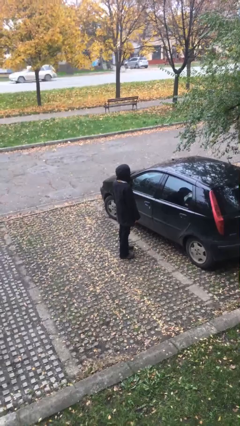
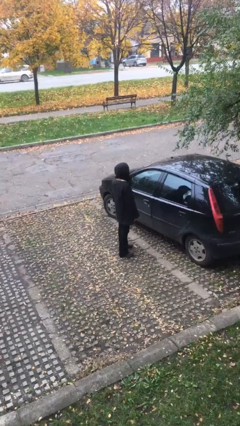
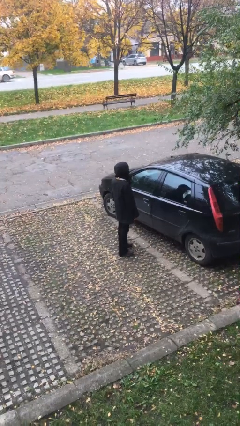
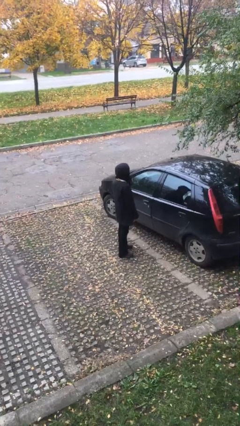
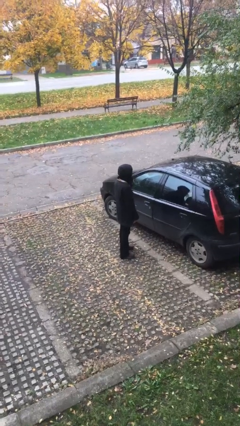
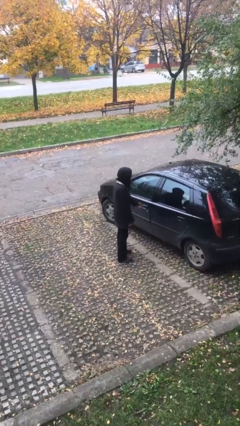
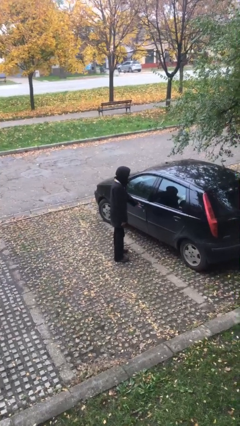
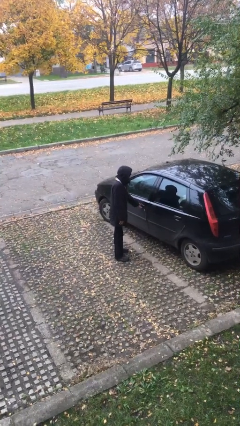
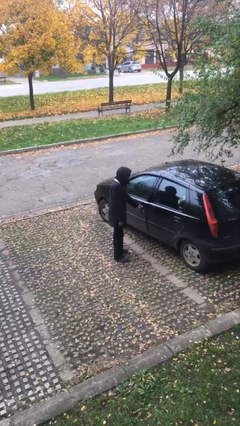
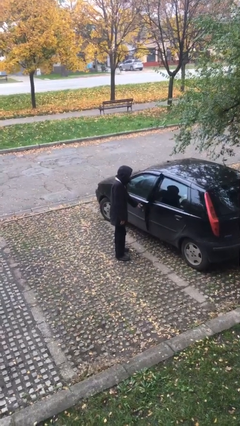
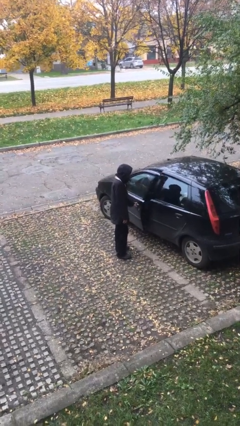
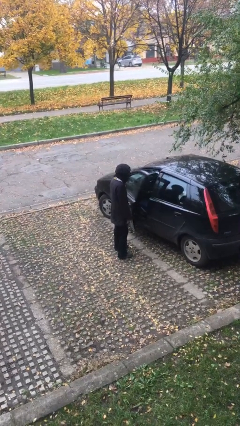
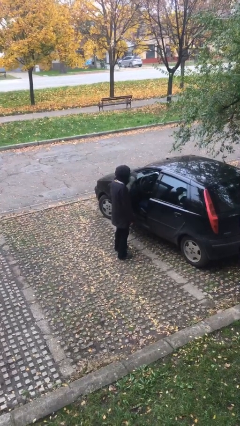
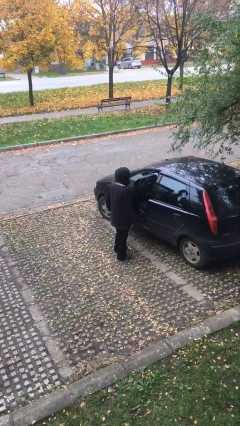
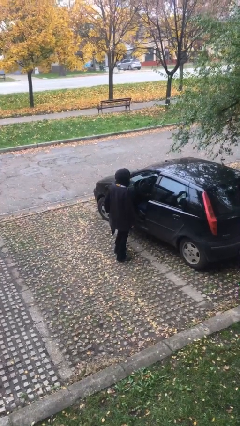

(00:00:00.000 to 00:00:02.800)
person opens car door

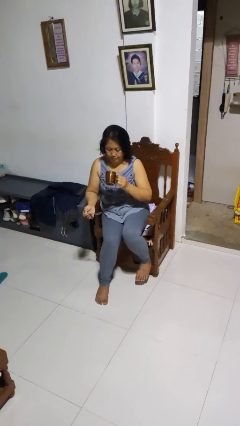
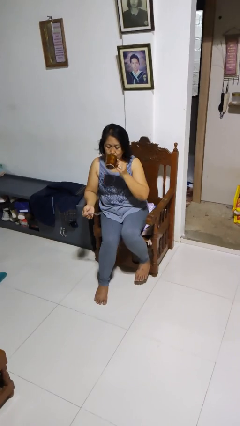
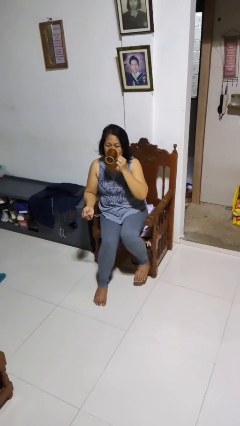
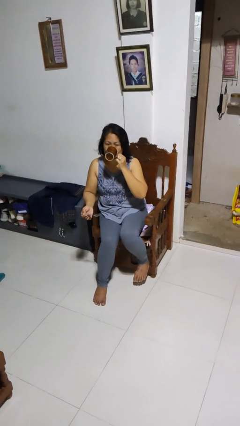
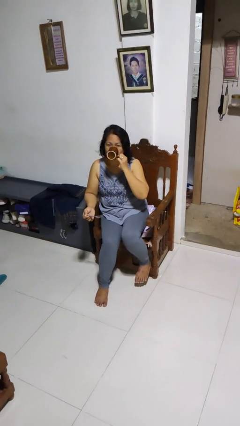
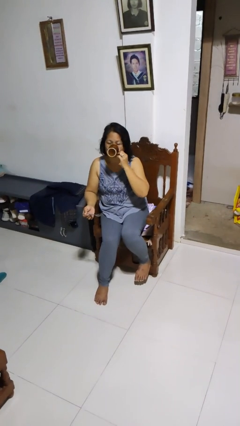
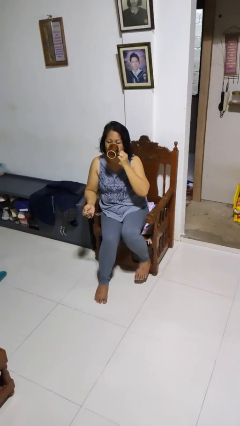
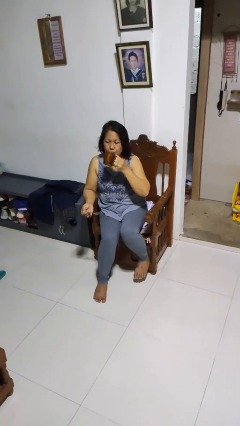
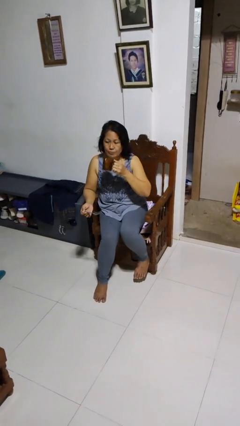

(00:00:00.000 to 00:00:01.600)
person drinks from mug

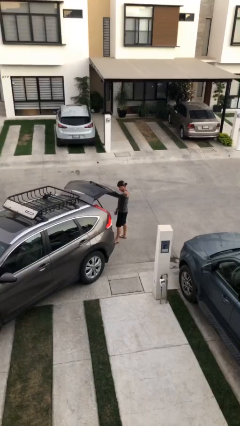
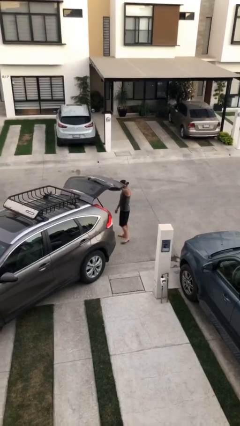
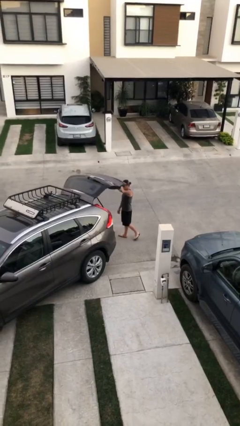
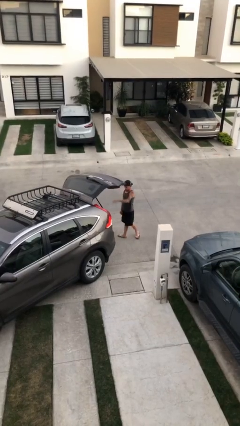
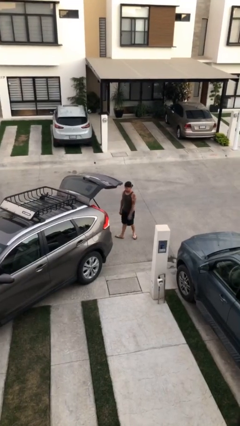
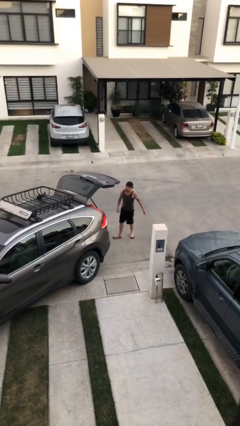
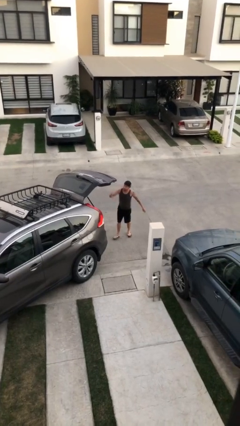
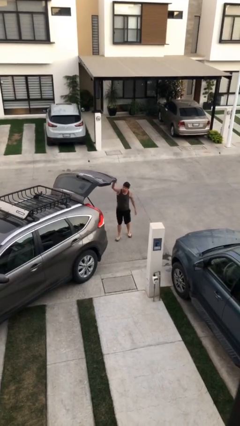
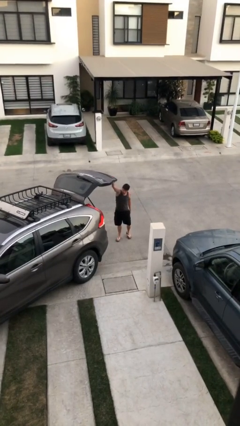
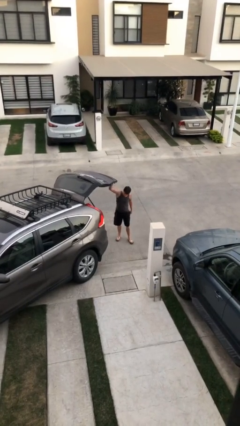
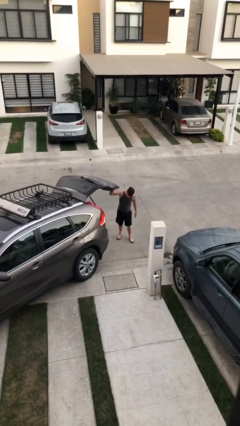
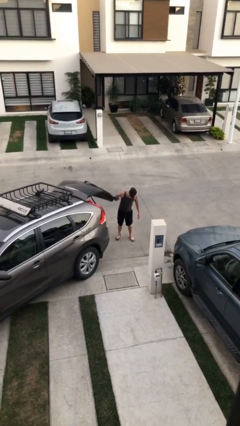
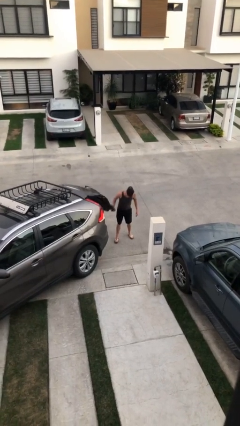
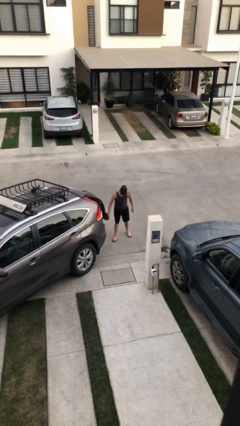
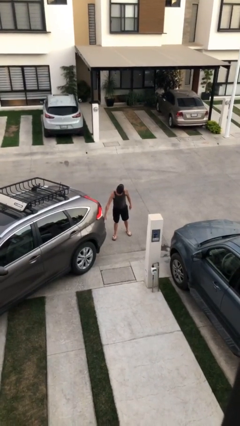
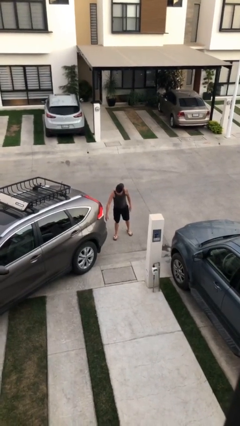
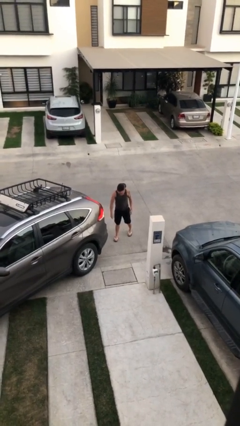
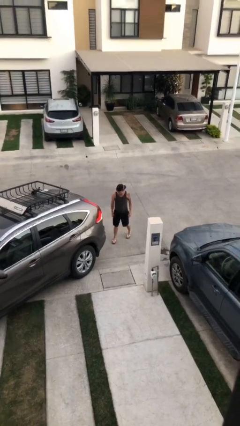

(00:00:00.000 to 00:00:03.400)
person closes car trunk

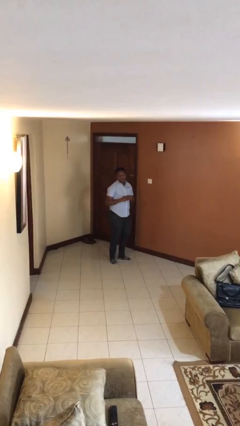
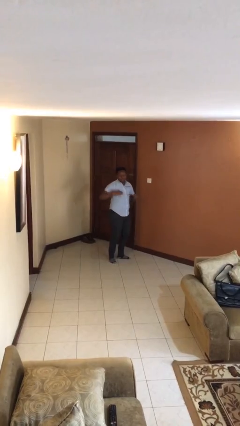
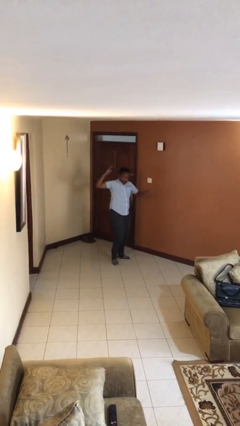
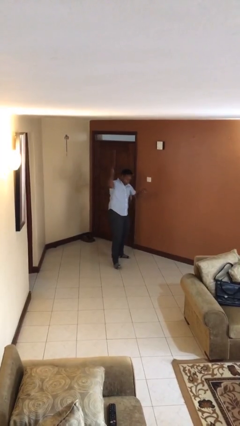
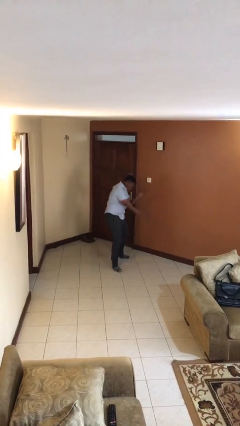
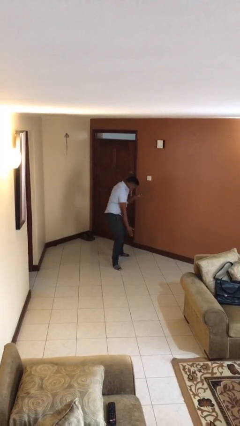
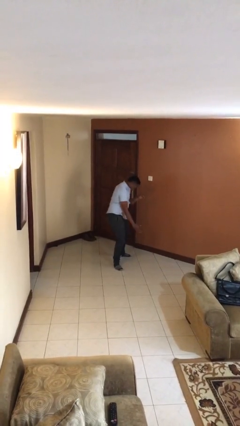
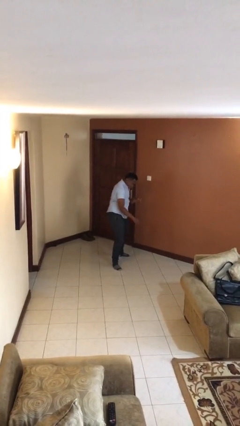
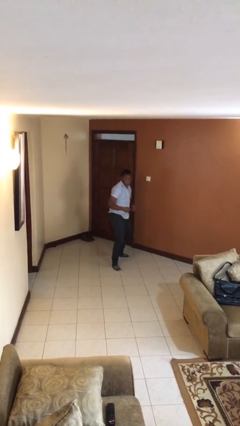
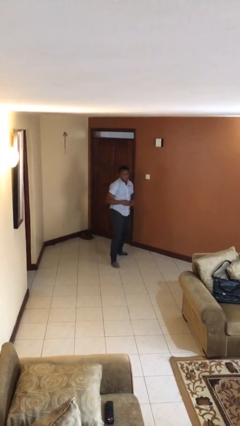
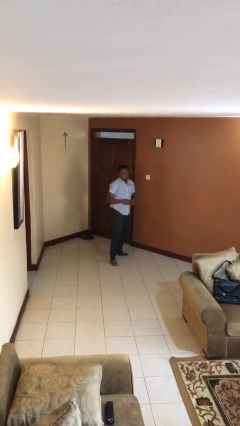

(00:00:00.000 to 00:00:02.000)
person karate chop

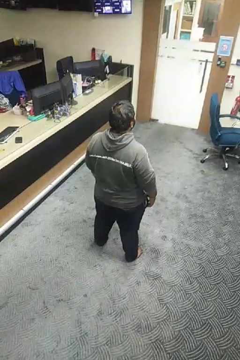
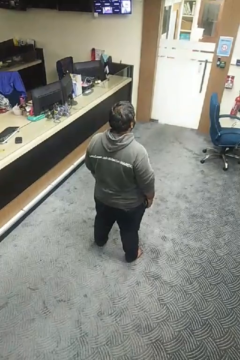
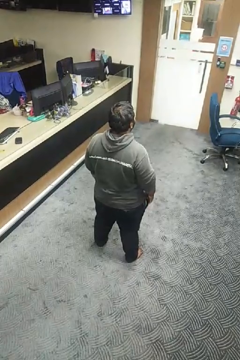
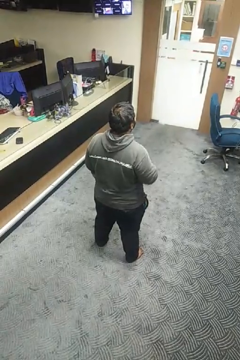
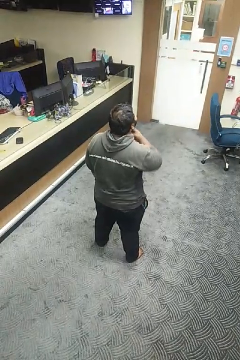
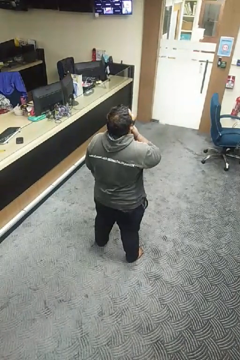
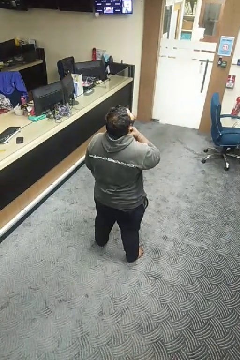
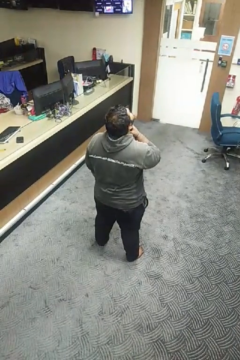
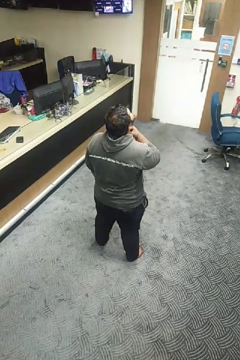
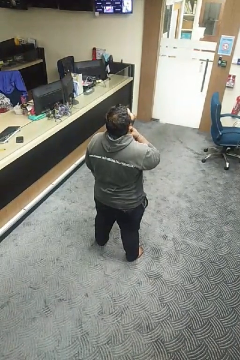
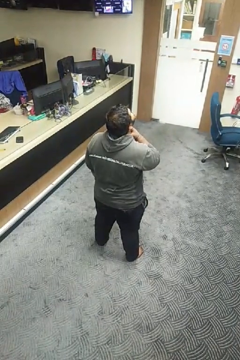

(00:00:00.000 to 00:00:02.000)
person rubs neck

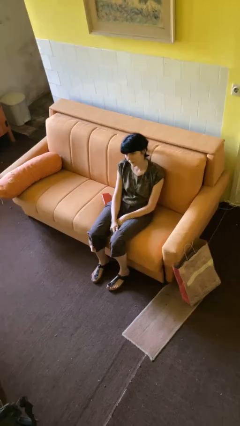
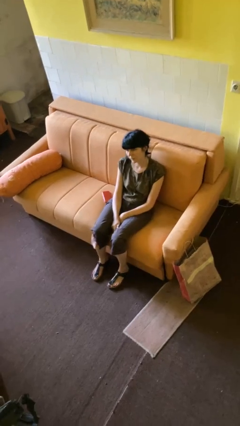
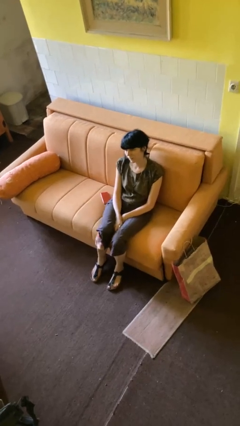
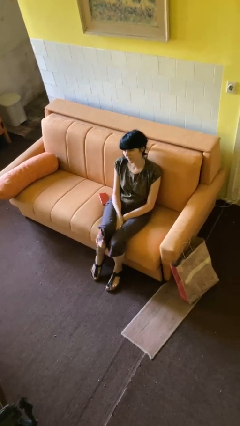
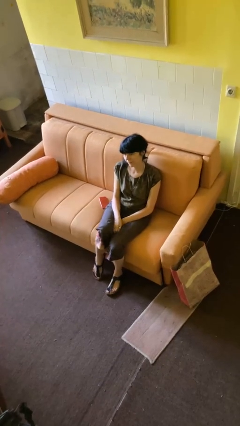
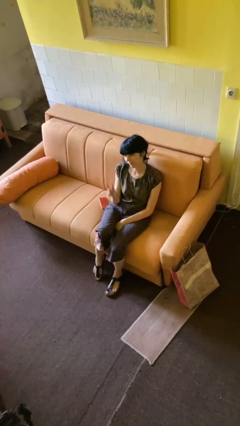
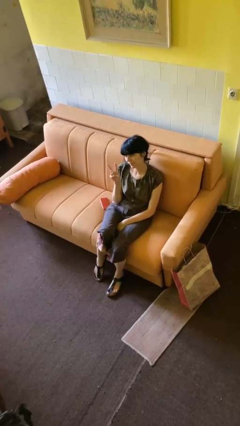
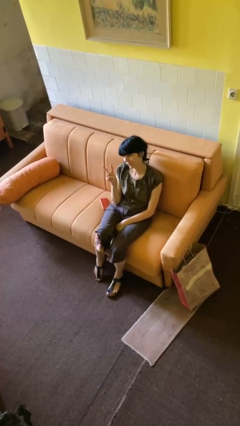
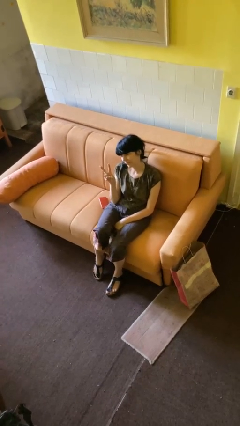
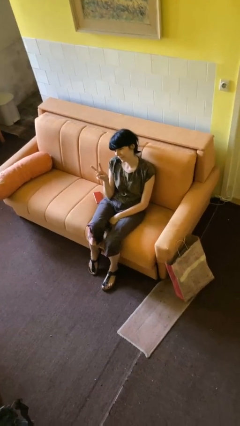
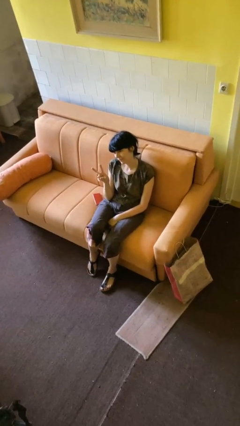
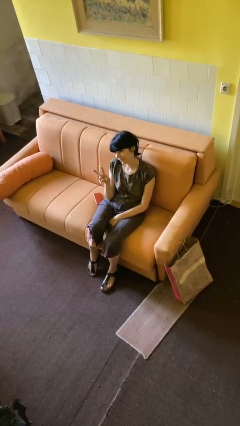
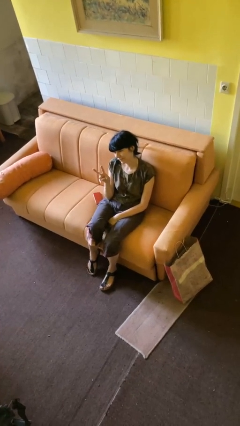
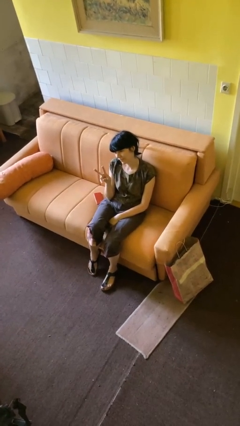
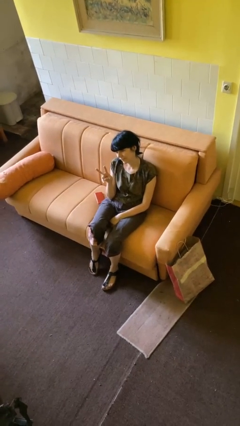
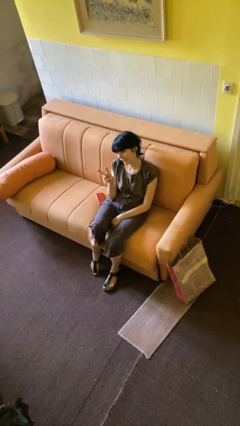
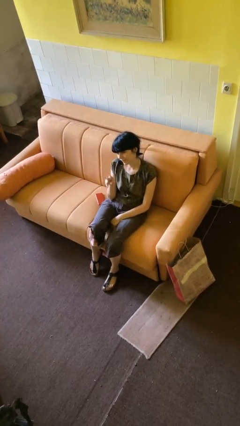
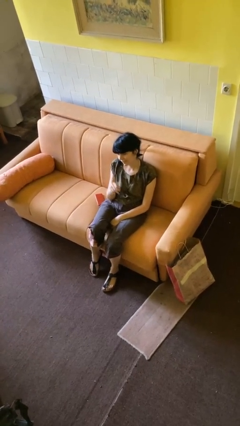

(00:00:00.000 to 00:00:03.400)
person gestures peace

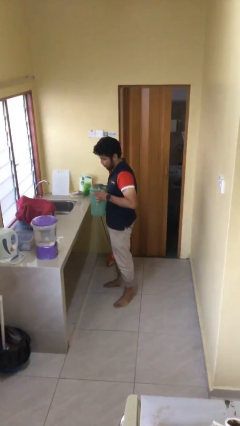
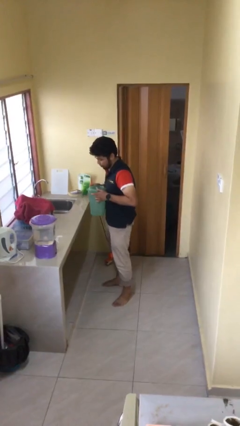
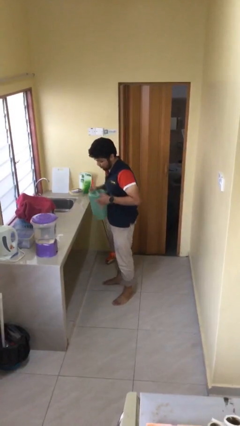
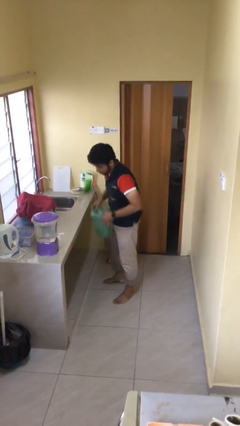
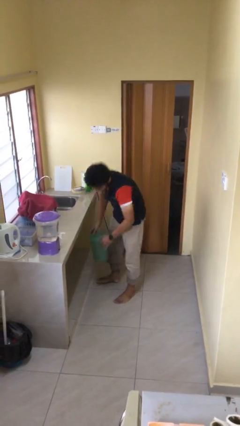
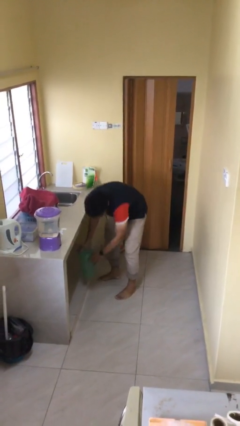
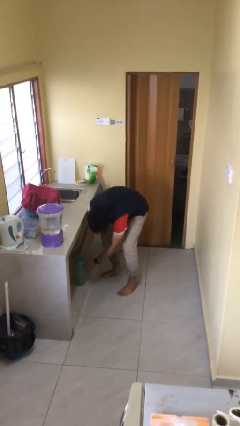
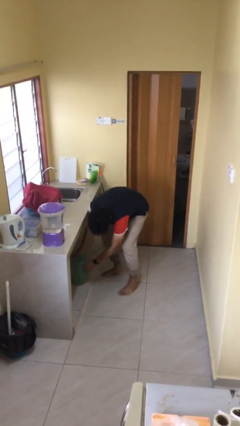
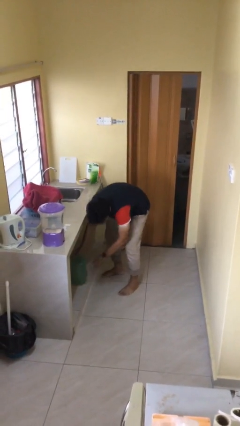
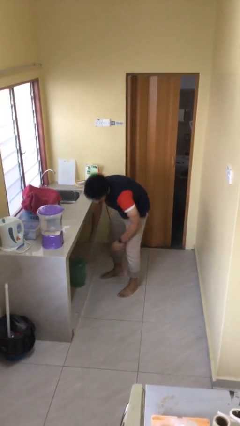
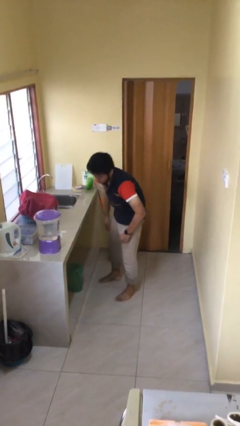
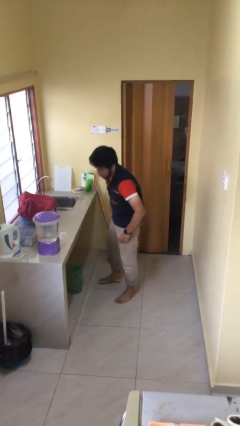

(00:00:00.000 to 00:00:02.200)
person puts down object into cabinet
